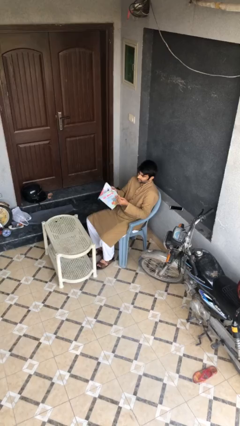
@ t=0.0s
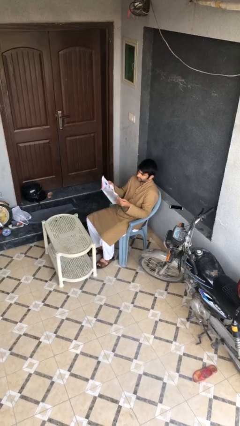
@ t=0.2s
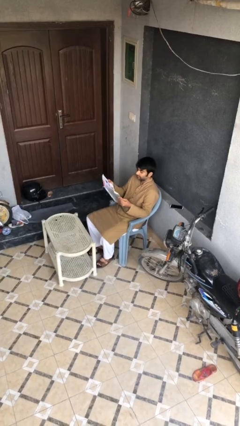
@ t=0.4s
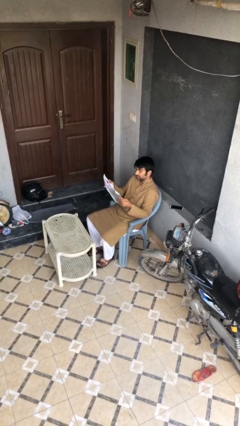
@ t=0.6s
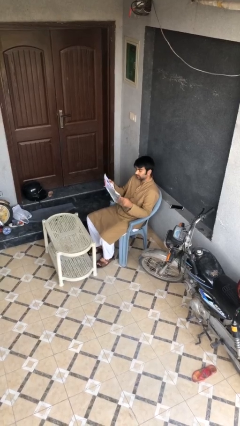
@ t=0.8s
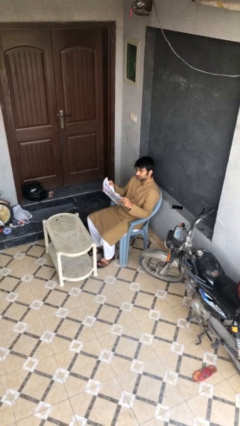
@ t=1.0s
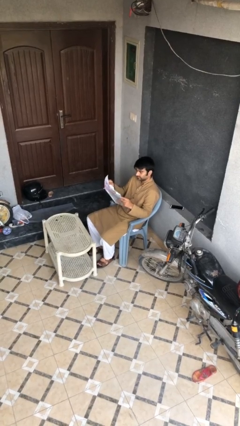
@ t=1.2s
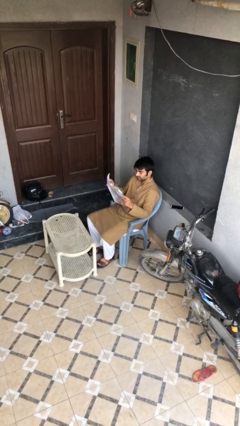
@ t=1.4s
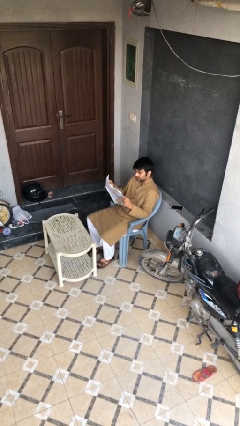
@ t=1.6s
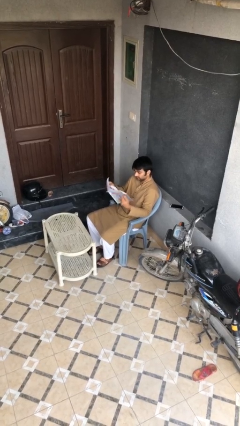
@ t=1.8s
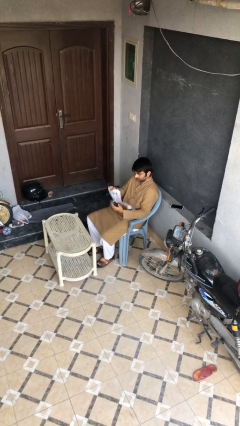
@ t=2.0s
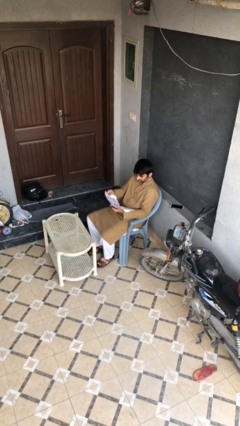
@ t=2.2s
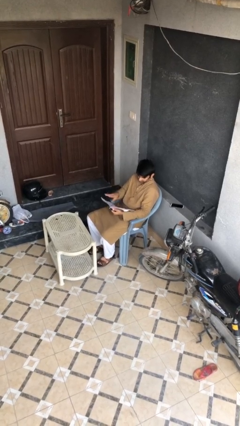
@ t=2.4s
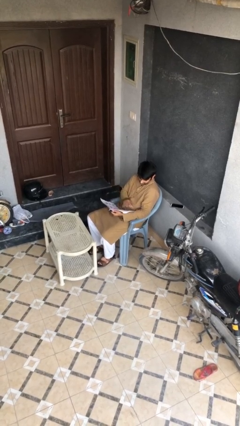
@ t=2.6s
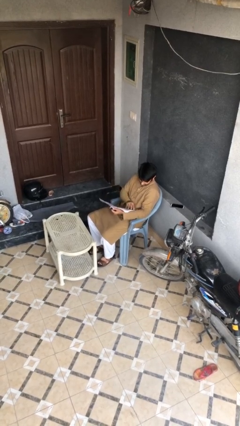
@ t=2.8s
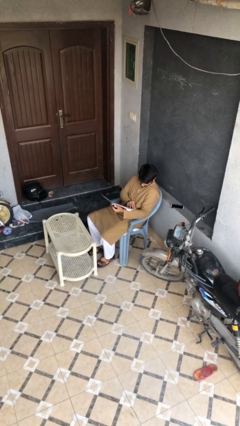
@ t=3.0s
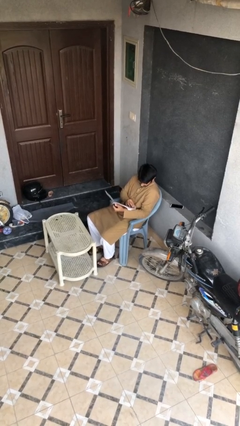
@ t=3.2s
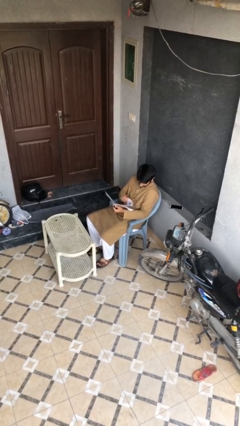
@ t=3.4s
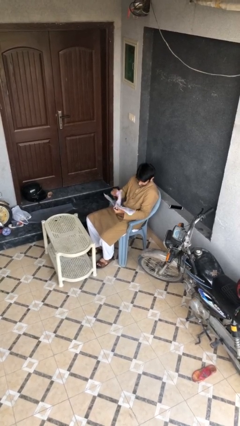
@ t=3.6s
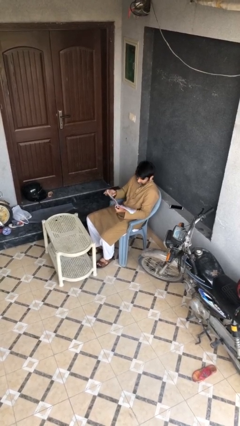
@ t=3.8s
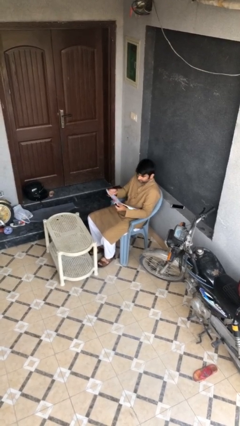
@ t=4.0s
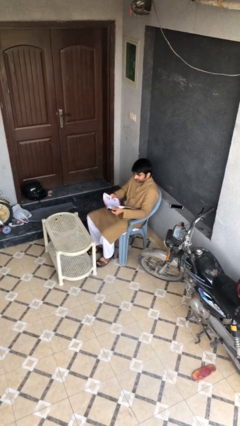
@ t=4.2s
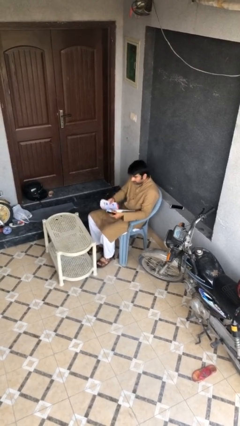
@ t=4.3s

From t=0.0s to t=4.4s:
person reads document

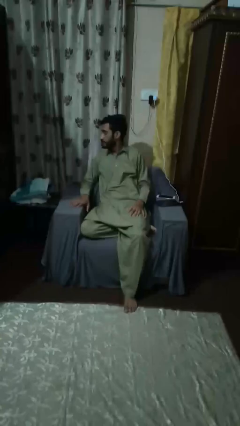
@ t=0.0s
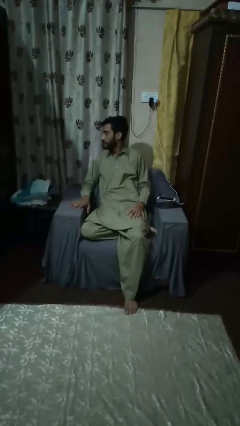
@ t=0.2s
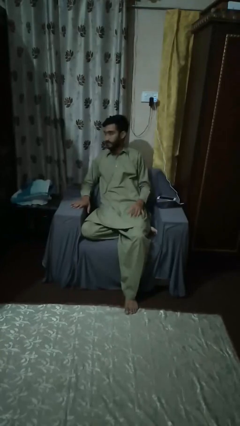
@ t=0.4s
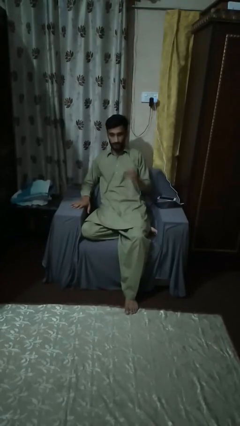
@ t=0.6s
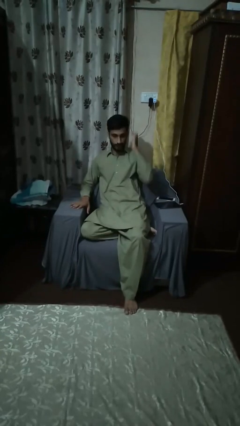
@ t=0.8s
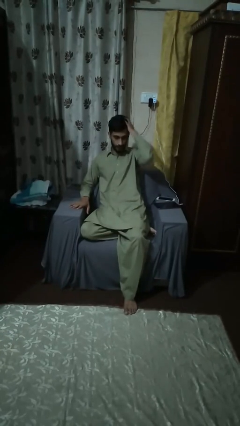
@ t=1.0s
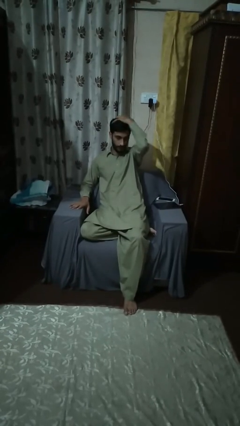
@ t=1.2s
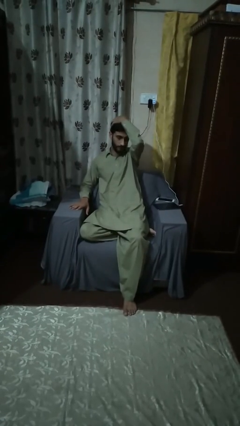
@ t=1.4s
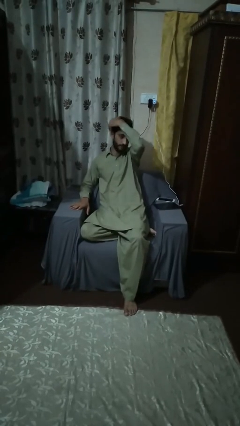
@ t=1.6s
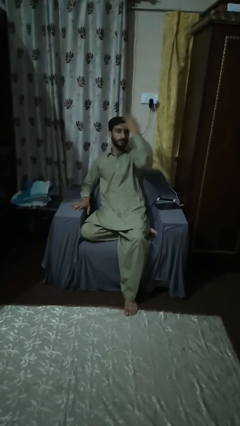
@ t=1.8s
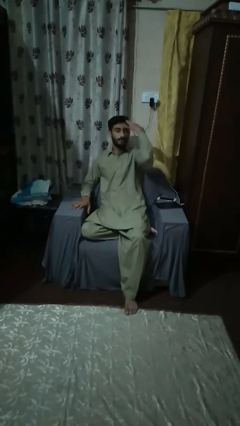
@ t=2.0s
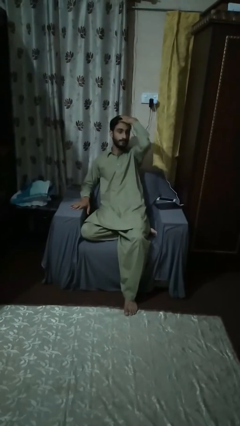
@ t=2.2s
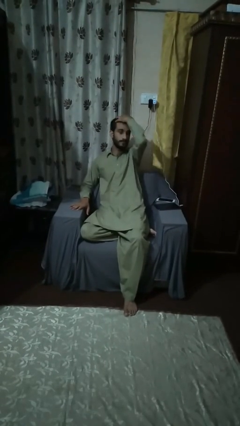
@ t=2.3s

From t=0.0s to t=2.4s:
person strokes hair

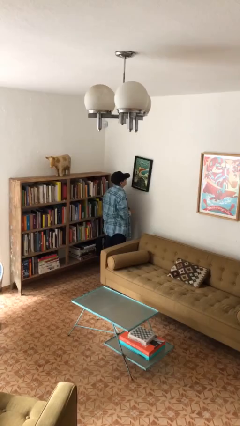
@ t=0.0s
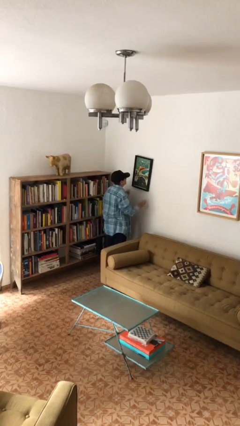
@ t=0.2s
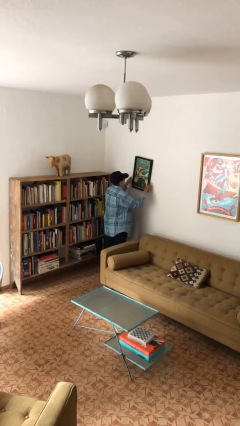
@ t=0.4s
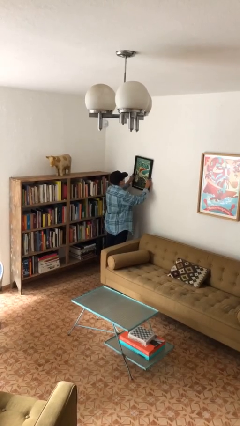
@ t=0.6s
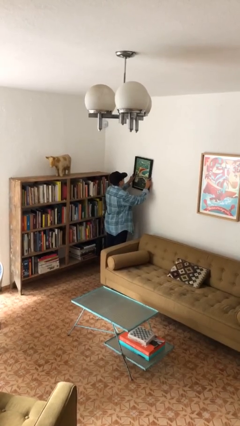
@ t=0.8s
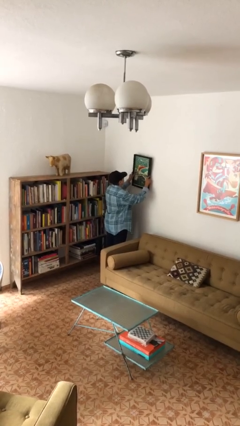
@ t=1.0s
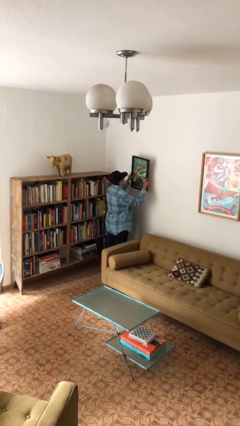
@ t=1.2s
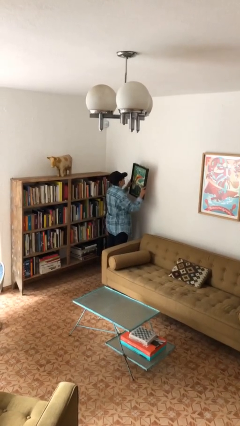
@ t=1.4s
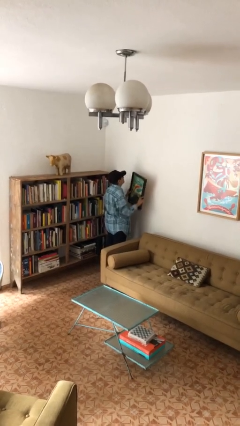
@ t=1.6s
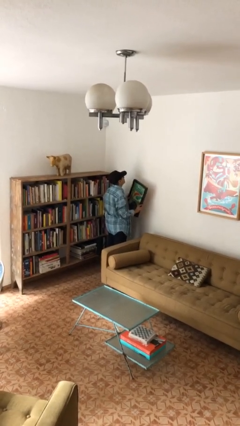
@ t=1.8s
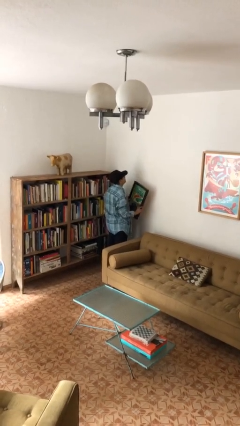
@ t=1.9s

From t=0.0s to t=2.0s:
person takes down picture frame

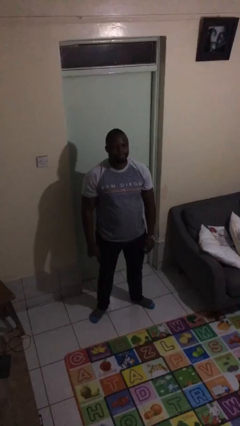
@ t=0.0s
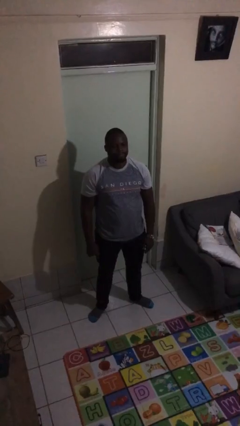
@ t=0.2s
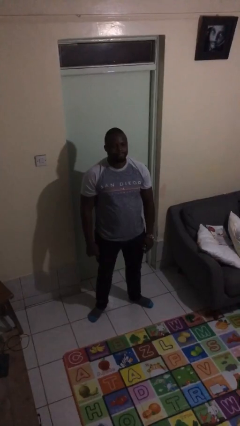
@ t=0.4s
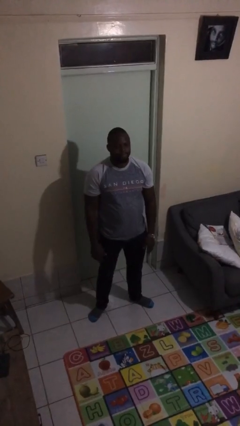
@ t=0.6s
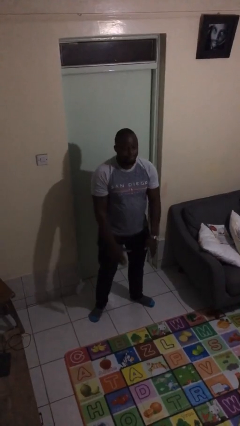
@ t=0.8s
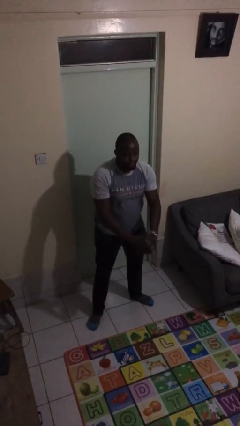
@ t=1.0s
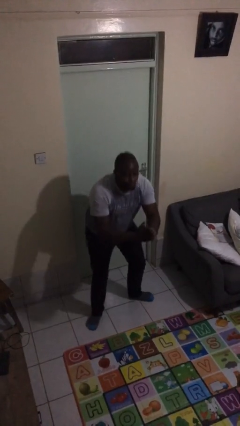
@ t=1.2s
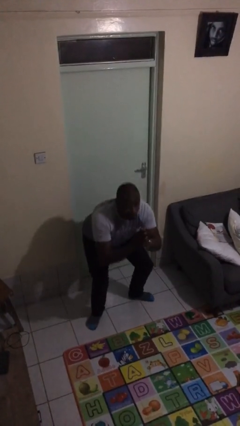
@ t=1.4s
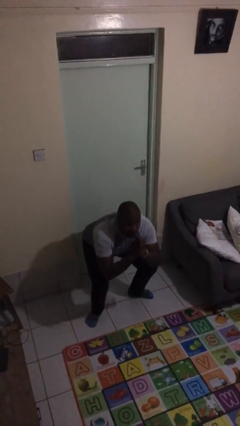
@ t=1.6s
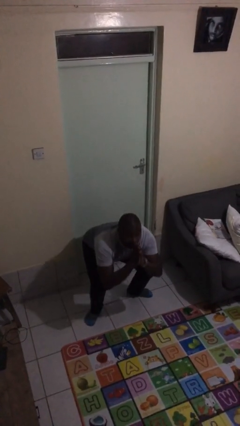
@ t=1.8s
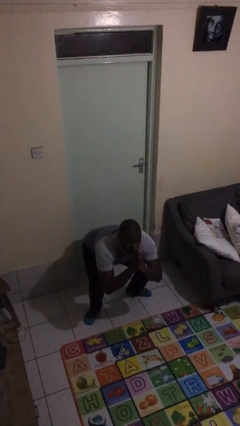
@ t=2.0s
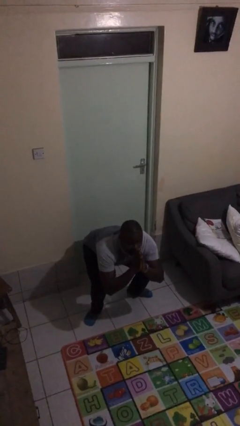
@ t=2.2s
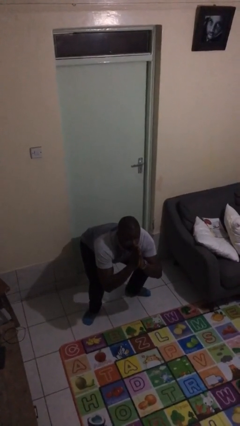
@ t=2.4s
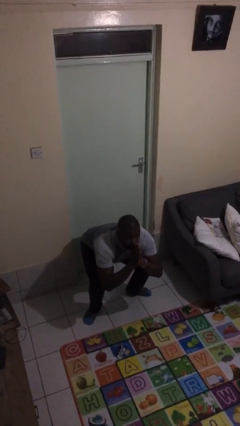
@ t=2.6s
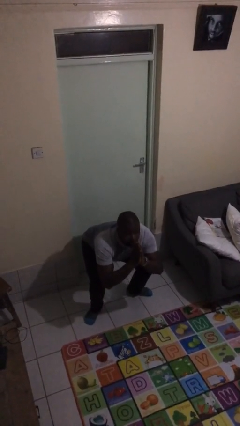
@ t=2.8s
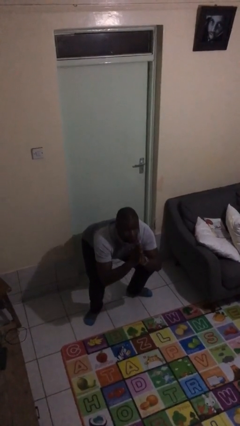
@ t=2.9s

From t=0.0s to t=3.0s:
person squats

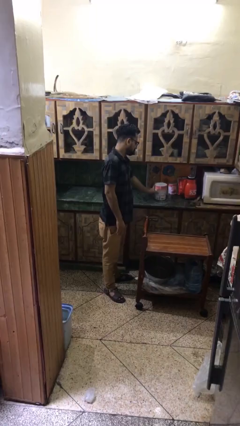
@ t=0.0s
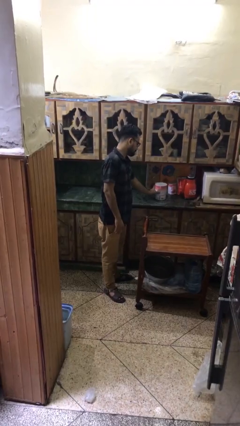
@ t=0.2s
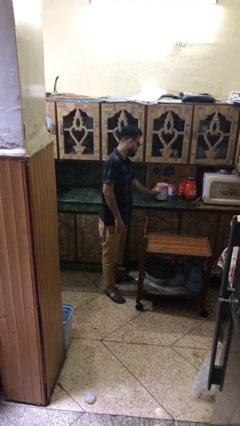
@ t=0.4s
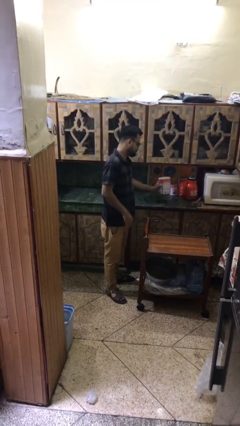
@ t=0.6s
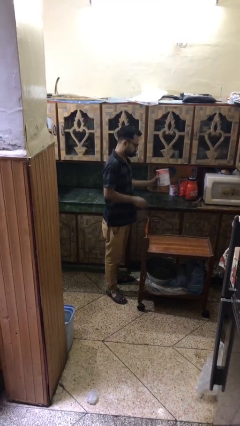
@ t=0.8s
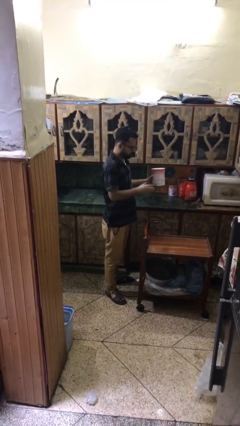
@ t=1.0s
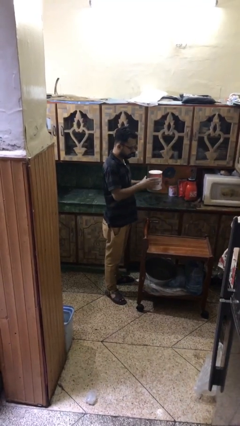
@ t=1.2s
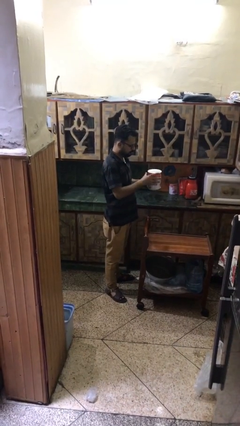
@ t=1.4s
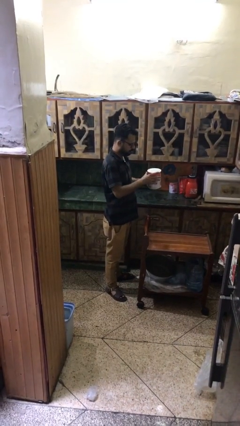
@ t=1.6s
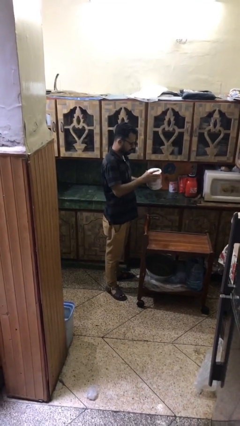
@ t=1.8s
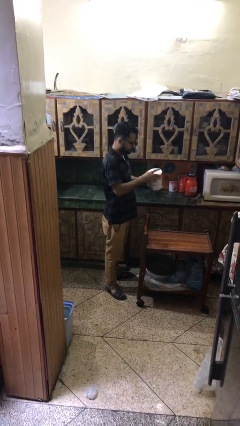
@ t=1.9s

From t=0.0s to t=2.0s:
person picks up object from shelf

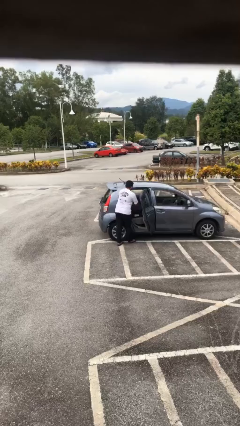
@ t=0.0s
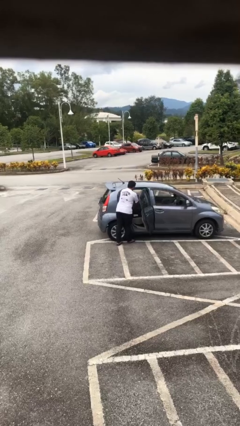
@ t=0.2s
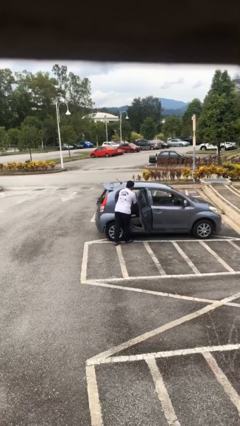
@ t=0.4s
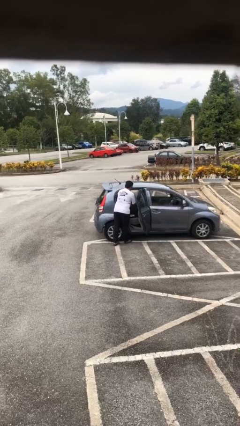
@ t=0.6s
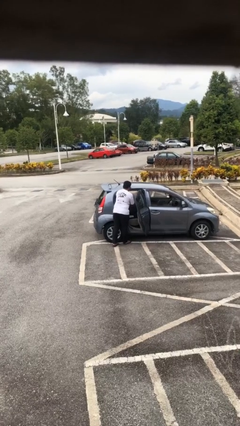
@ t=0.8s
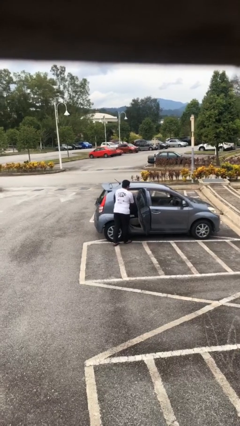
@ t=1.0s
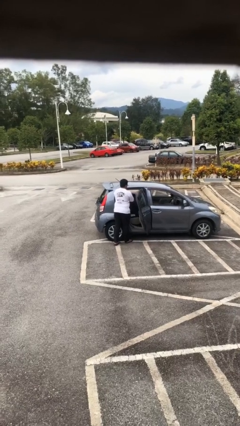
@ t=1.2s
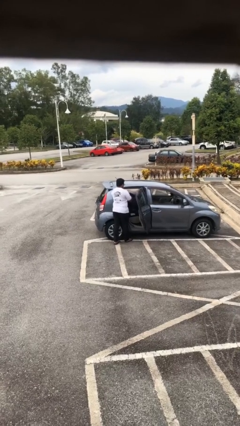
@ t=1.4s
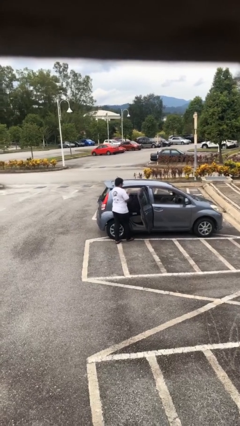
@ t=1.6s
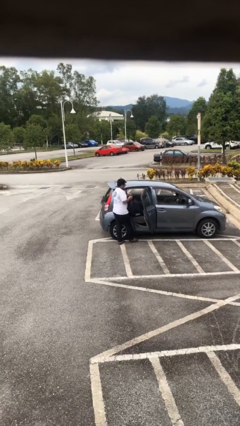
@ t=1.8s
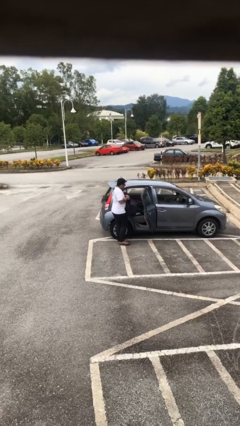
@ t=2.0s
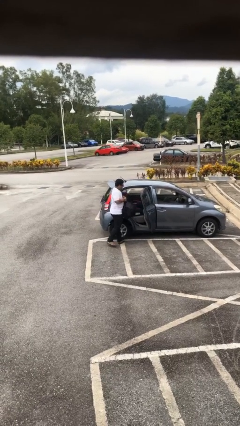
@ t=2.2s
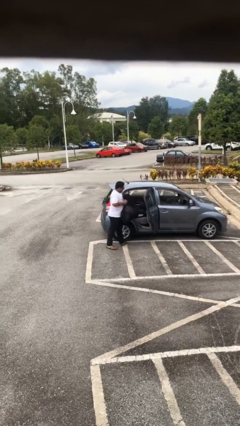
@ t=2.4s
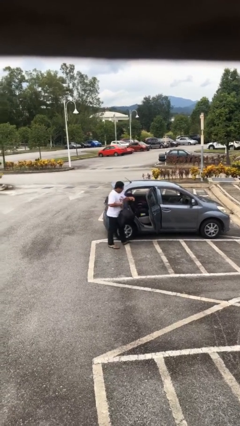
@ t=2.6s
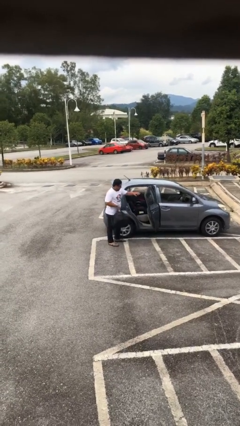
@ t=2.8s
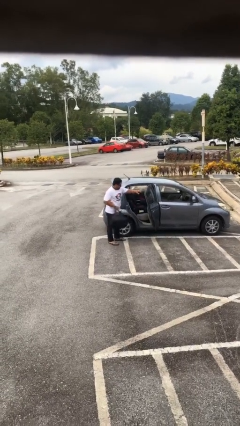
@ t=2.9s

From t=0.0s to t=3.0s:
person unloads car

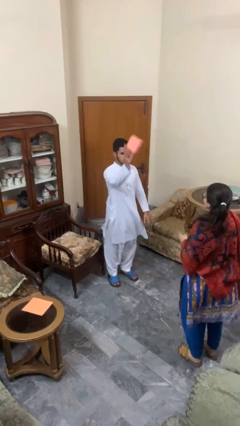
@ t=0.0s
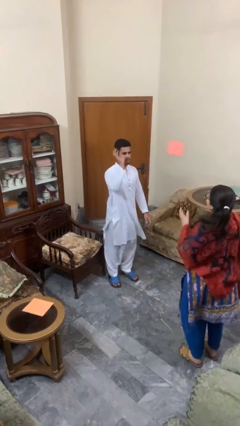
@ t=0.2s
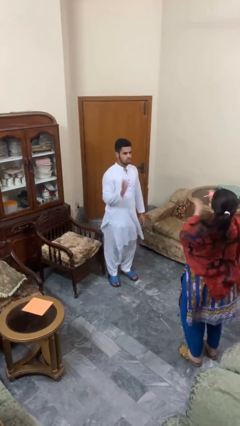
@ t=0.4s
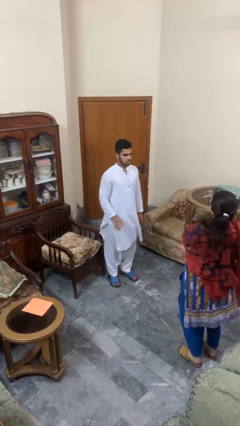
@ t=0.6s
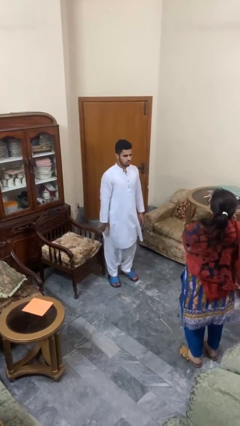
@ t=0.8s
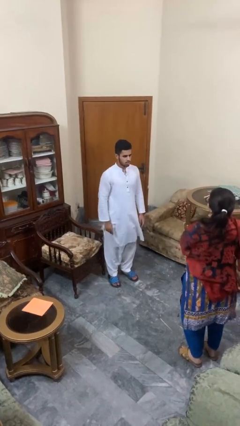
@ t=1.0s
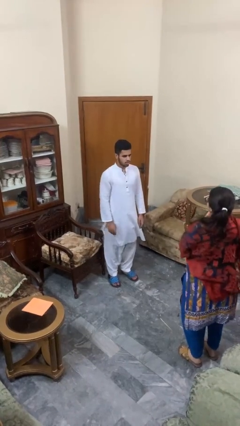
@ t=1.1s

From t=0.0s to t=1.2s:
person throws object to person
